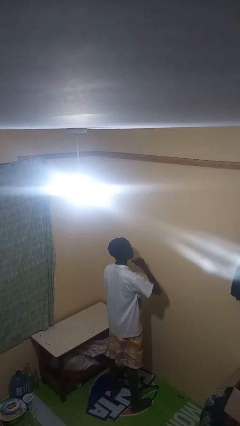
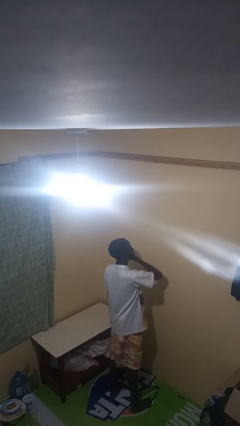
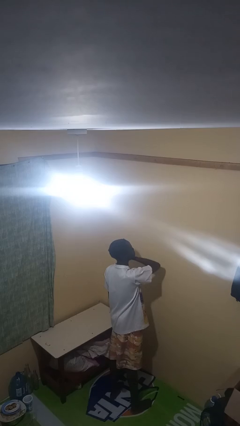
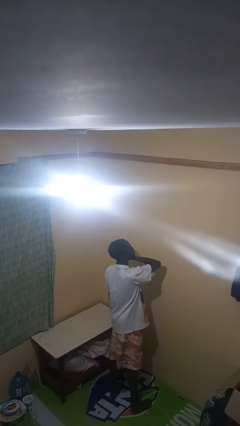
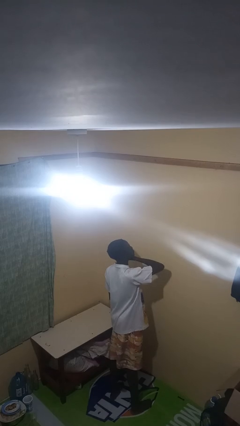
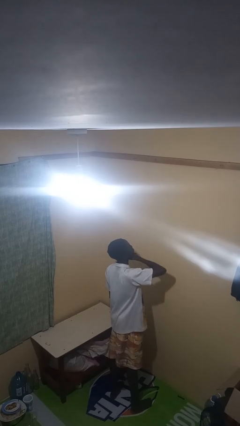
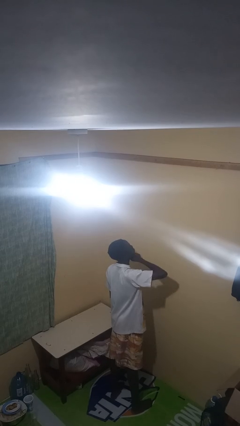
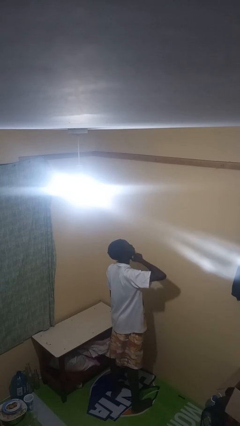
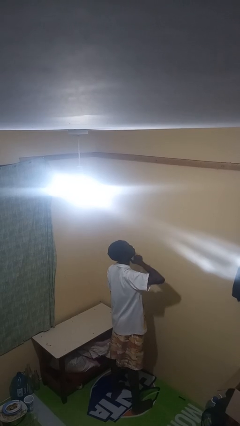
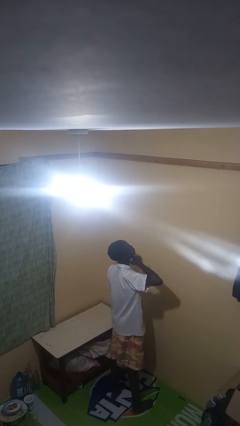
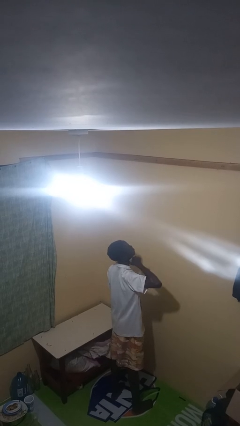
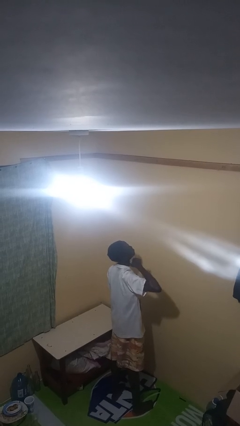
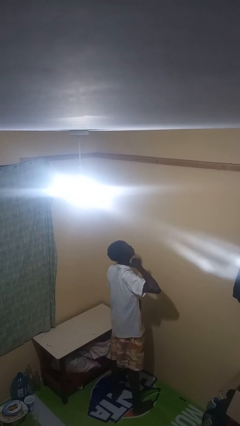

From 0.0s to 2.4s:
person gestures cut

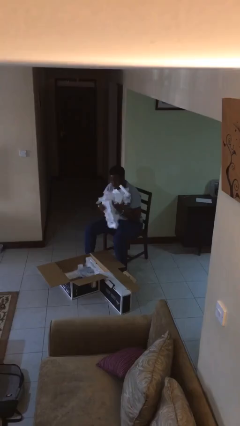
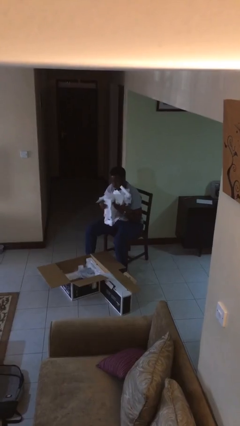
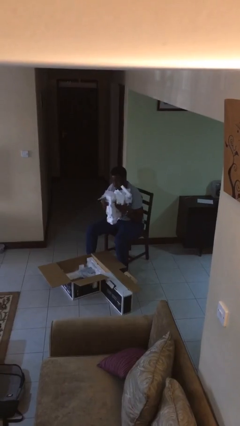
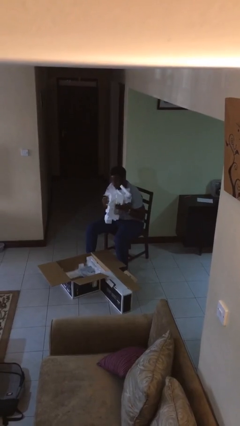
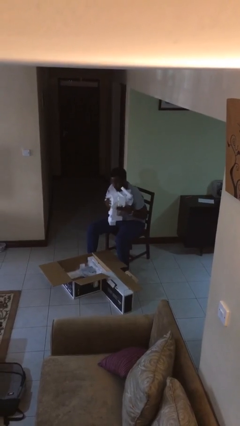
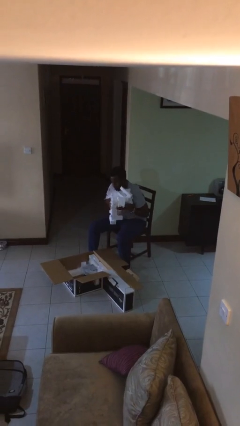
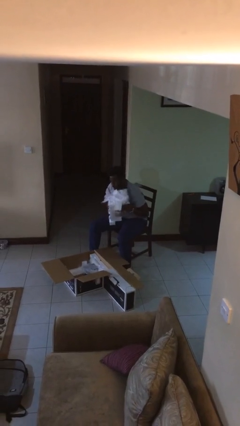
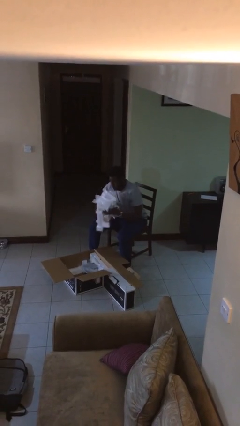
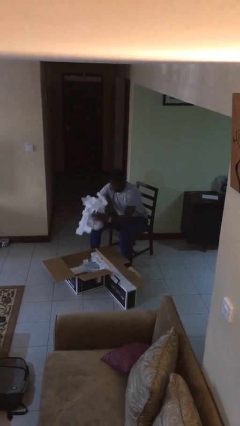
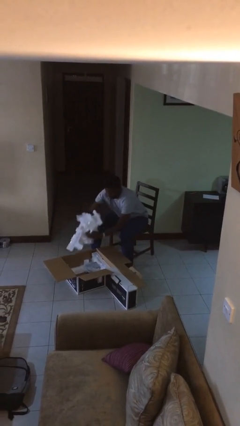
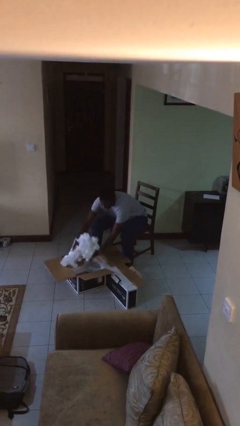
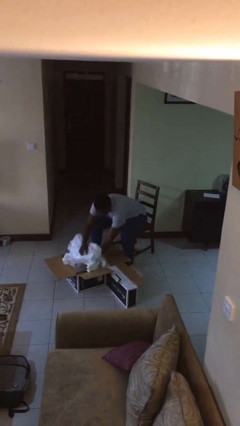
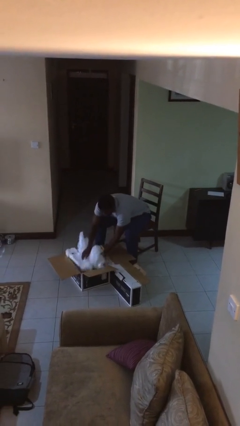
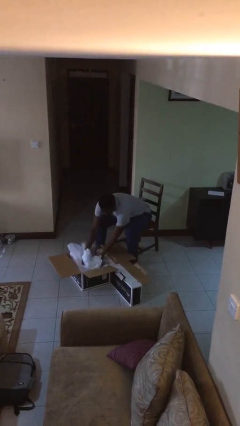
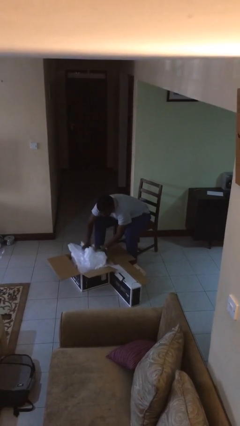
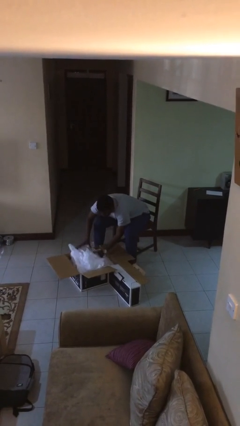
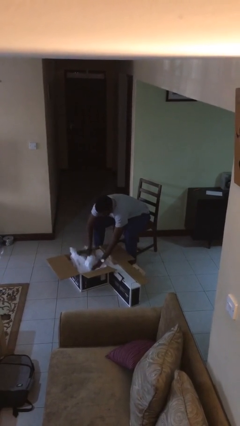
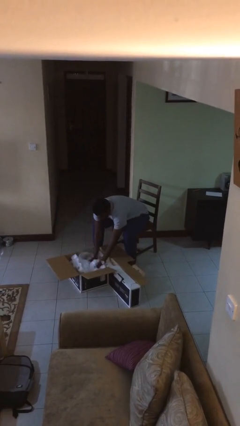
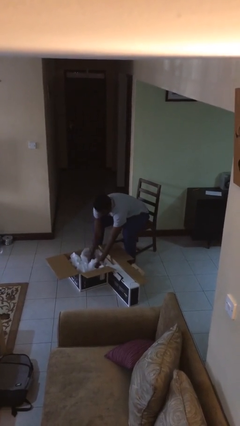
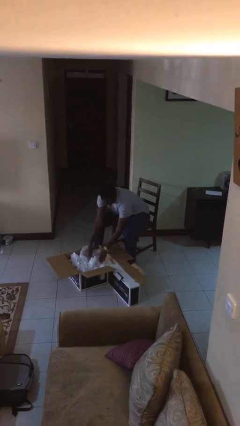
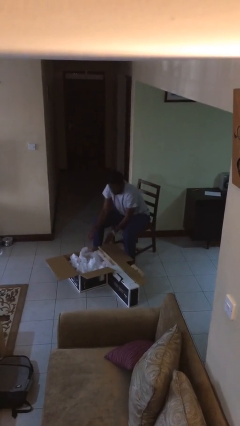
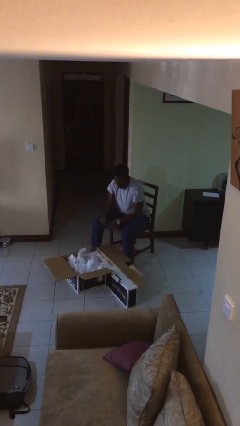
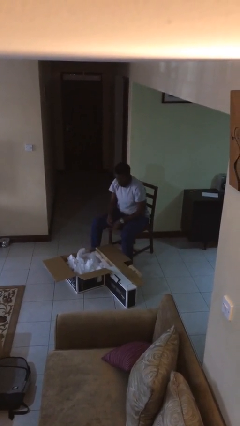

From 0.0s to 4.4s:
person puts object into box

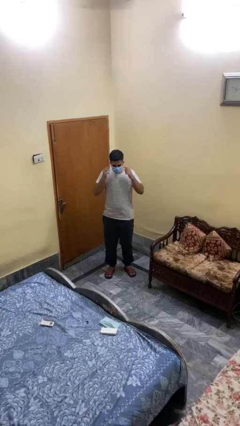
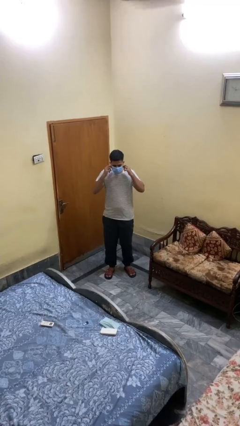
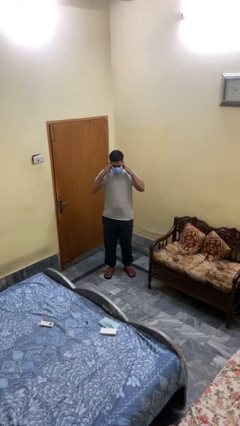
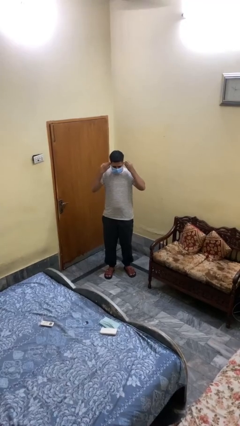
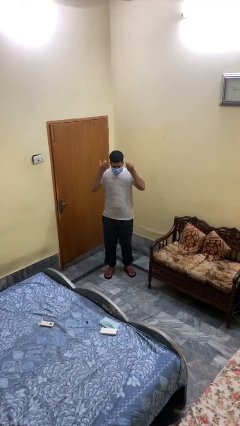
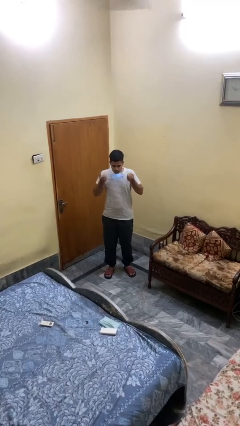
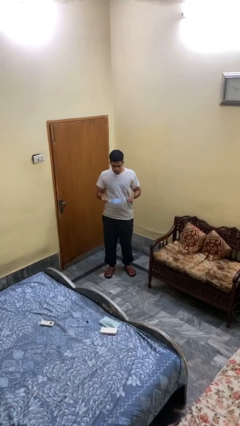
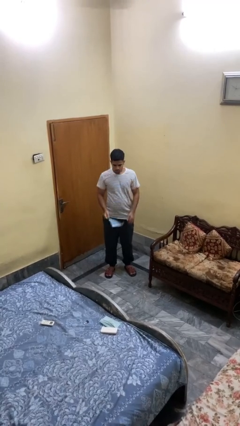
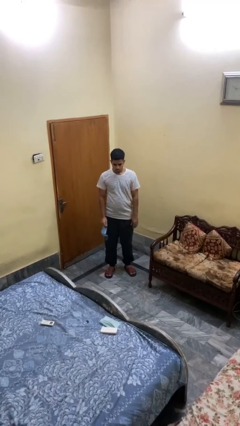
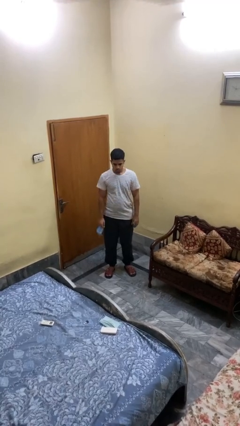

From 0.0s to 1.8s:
person takes off facemask

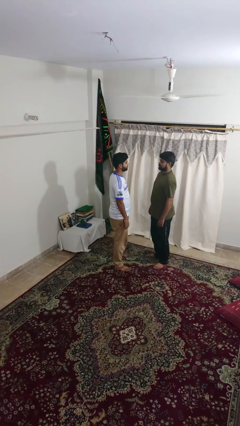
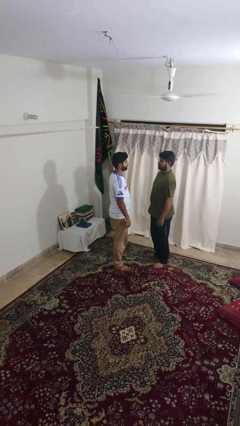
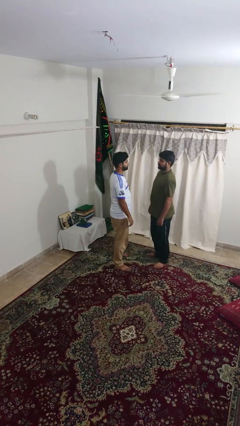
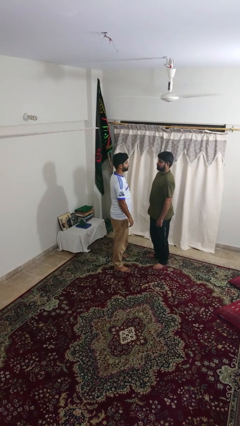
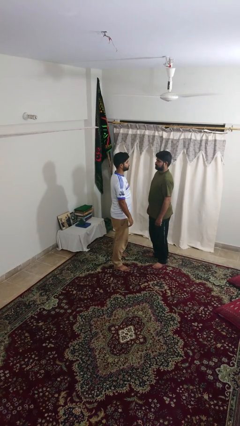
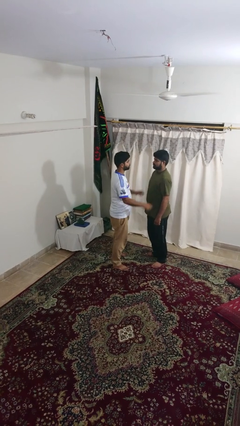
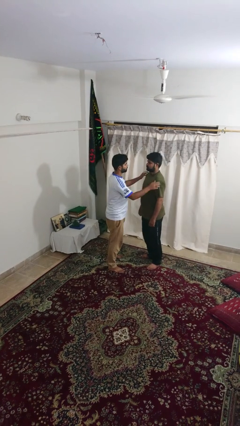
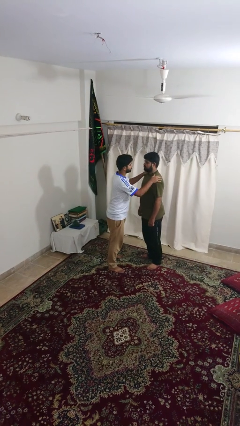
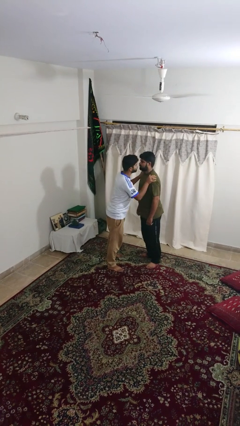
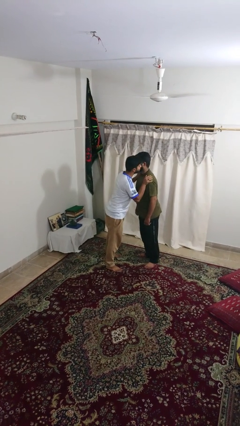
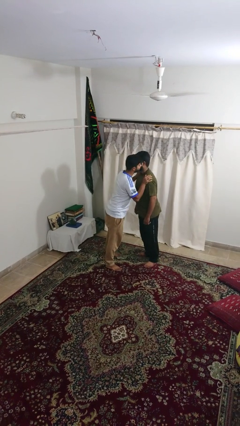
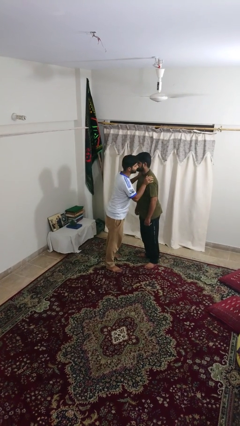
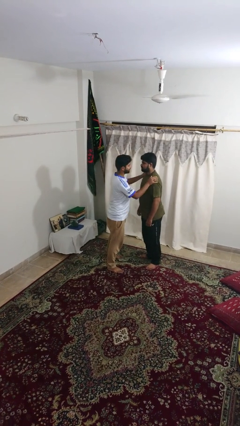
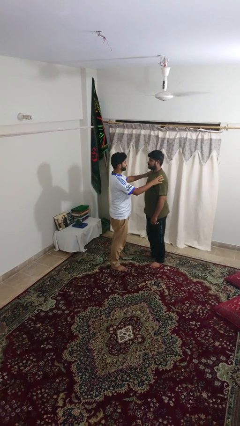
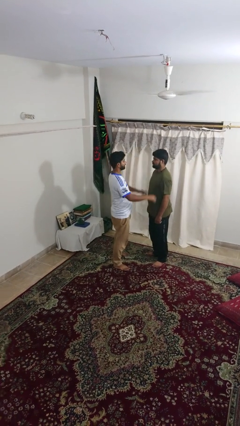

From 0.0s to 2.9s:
person kisses cheek of person

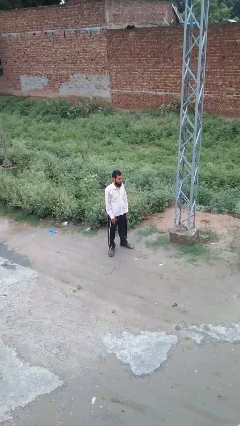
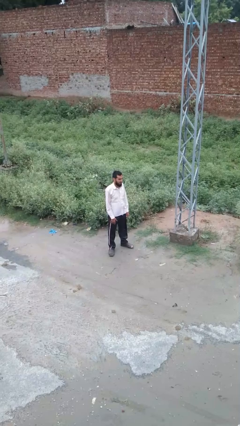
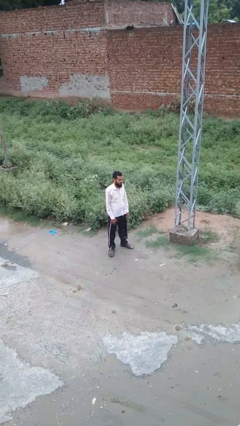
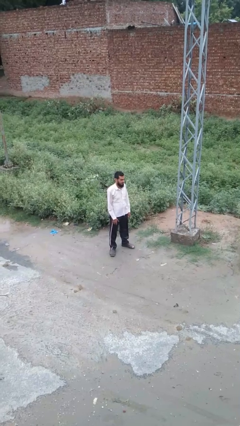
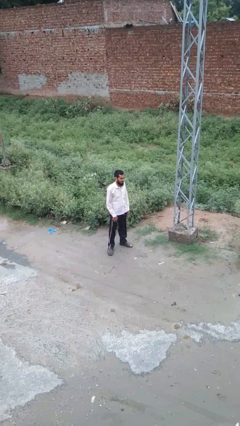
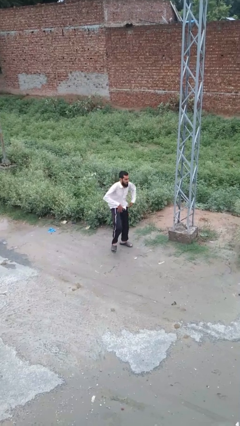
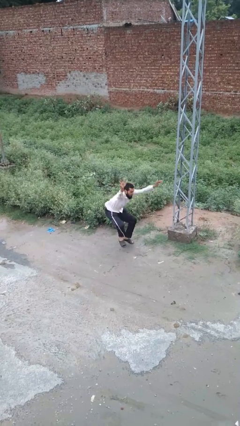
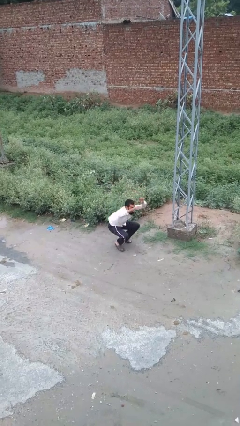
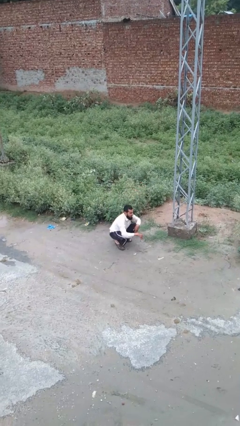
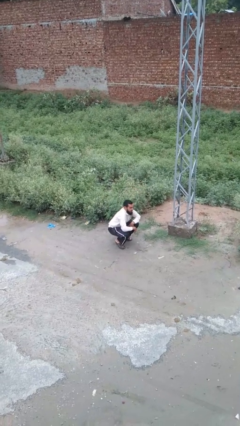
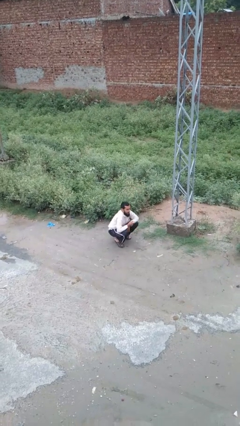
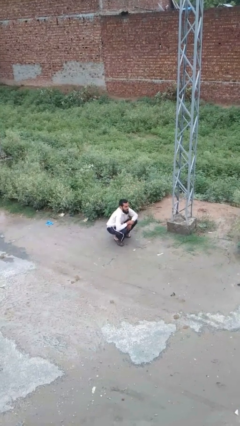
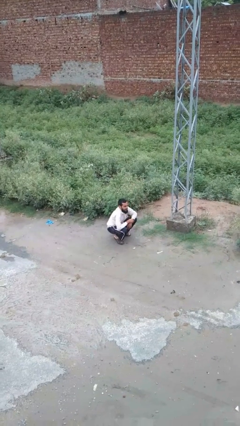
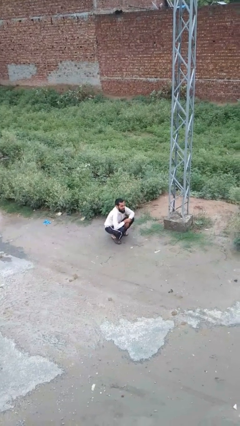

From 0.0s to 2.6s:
person trips on object on floor

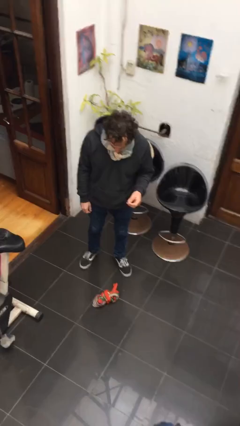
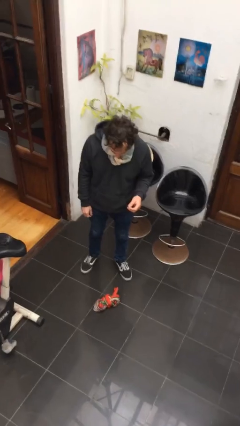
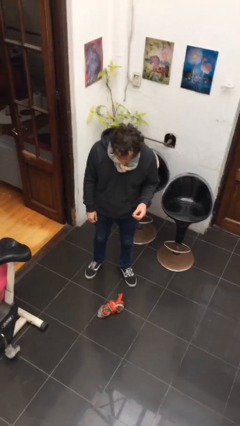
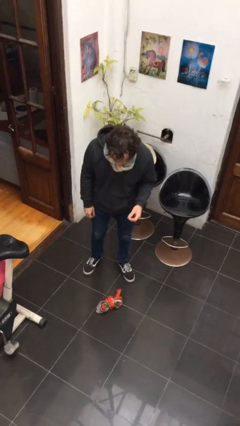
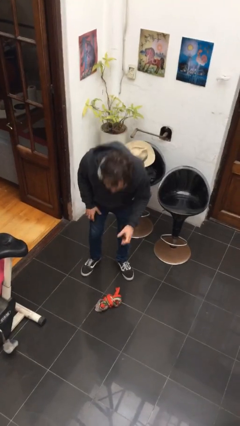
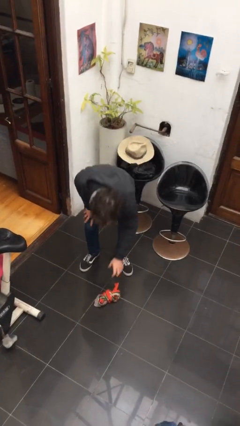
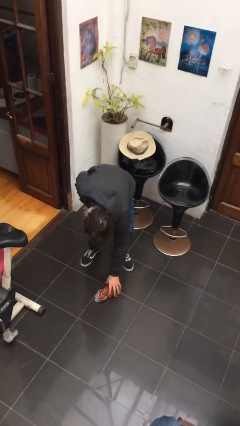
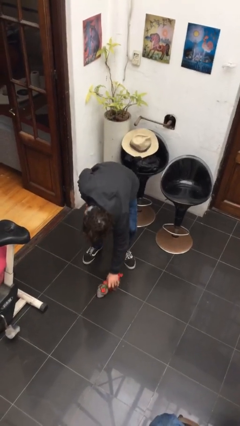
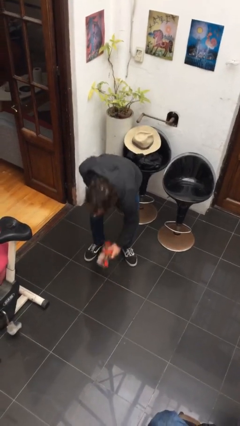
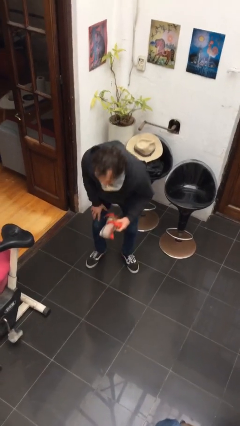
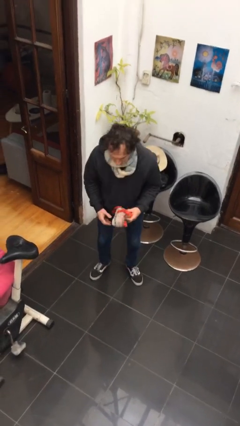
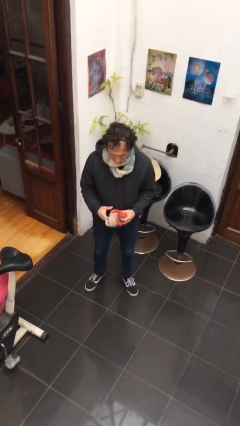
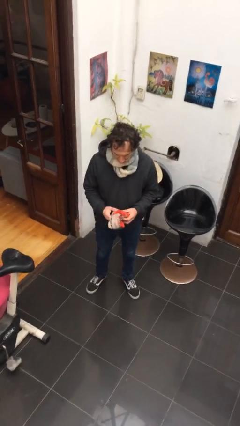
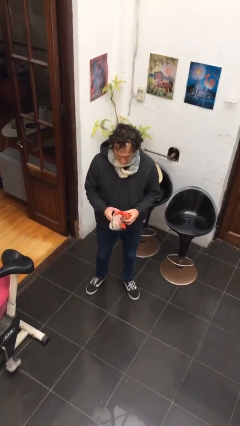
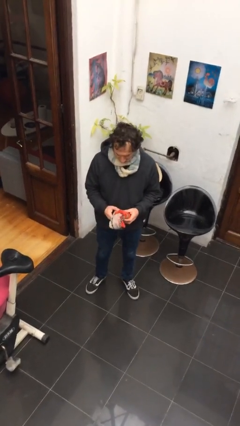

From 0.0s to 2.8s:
person picks up object from floor

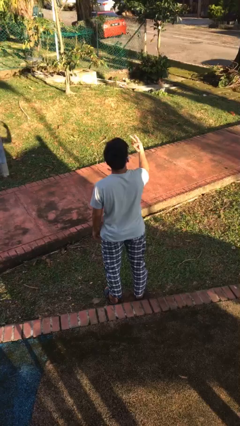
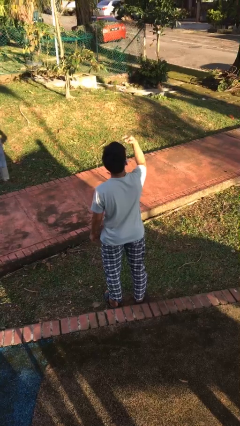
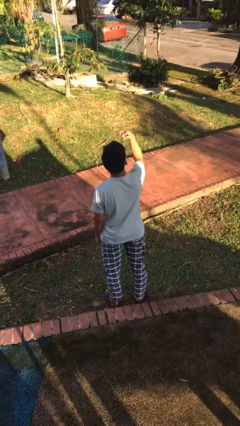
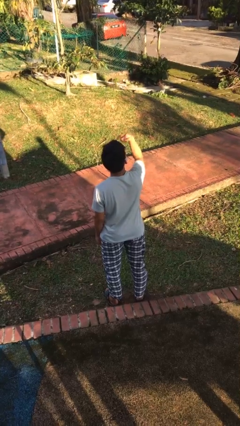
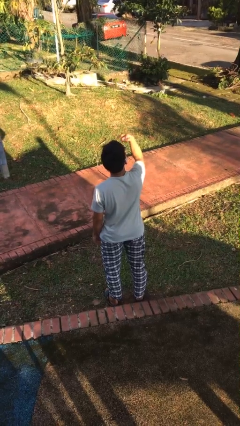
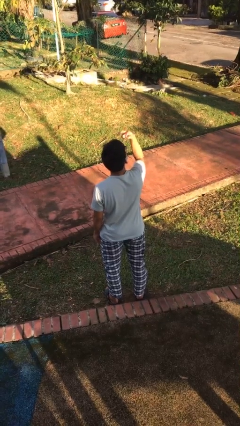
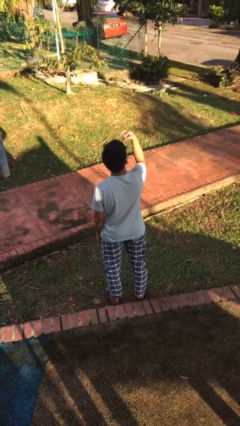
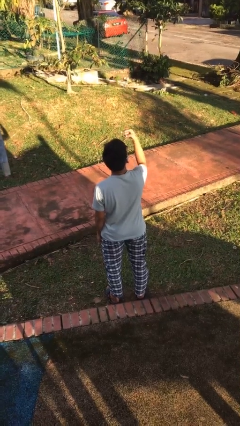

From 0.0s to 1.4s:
person gestures watch closely
